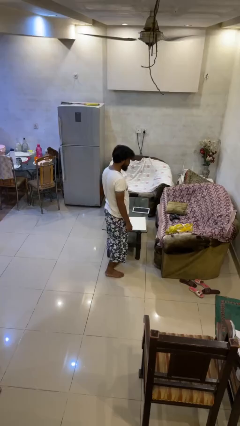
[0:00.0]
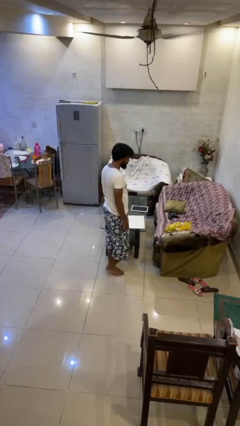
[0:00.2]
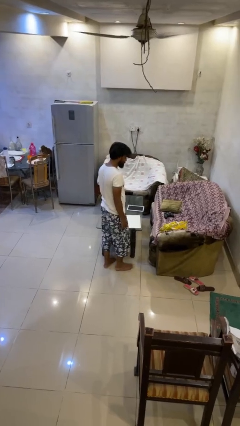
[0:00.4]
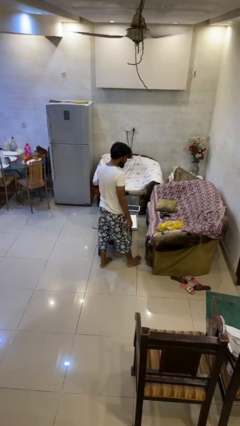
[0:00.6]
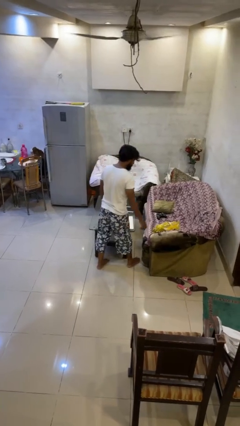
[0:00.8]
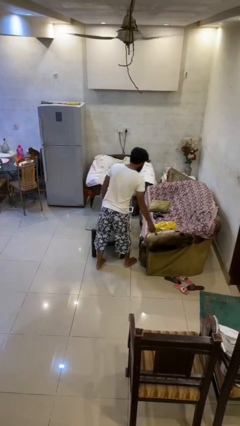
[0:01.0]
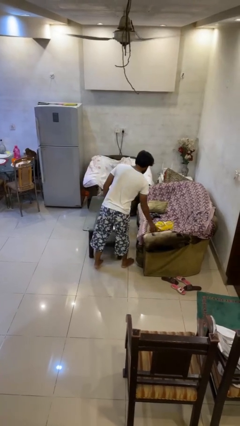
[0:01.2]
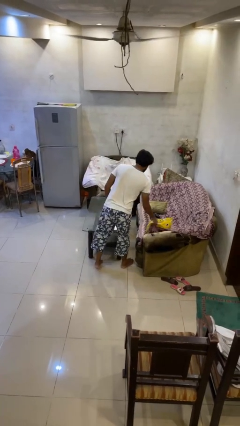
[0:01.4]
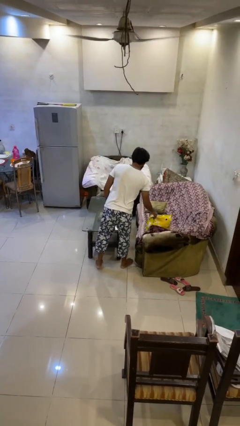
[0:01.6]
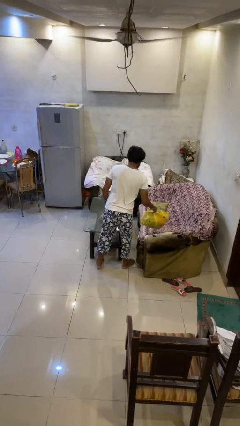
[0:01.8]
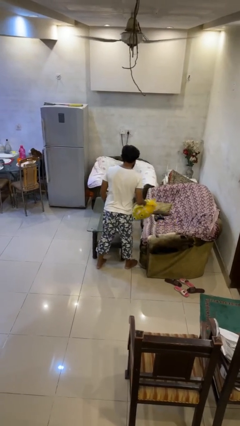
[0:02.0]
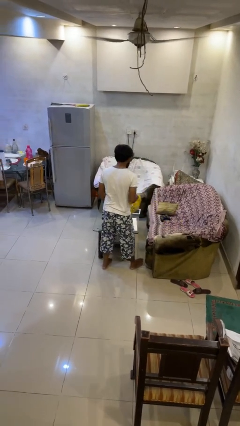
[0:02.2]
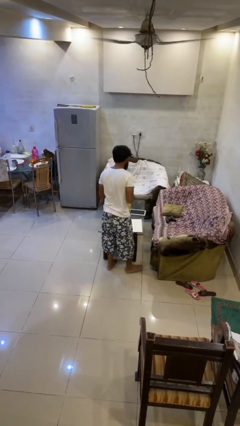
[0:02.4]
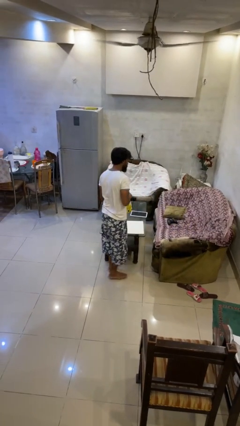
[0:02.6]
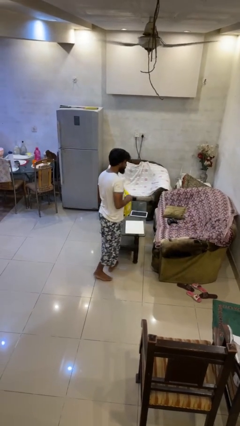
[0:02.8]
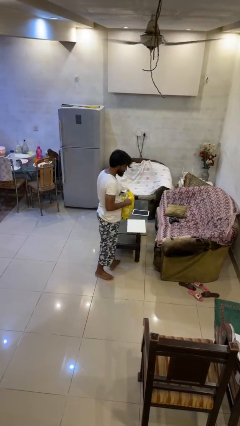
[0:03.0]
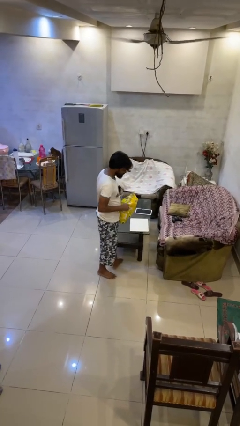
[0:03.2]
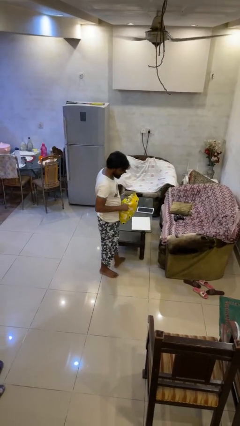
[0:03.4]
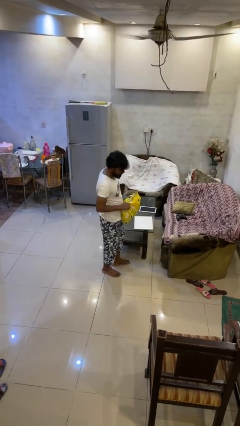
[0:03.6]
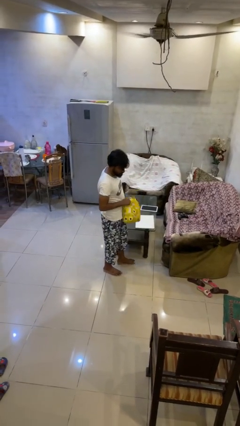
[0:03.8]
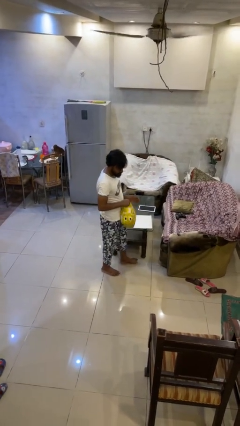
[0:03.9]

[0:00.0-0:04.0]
person picks up object from couch

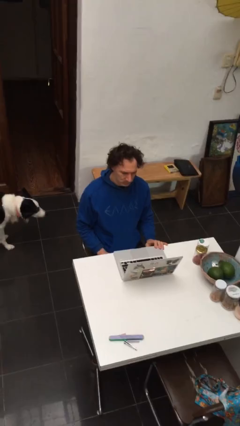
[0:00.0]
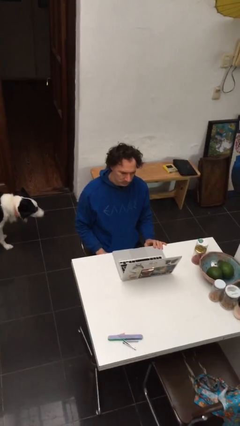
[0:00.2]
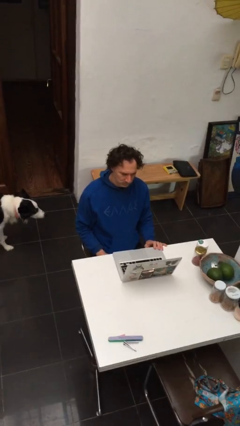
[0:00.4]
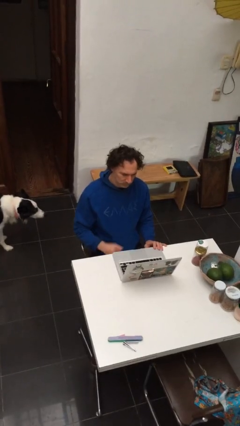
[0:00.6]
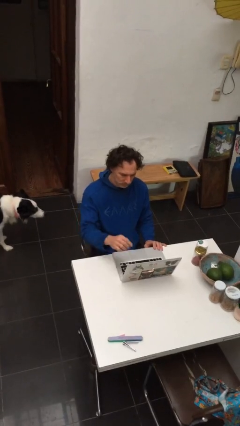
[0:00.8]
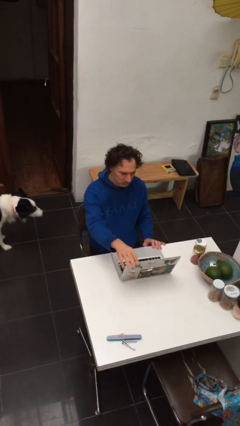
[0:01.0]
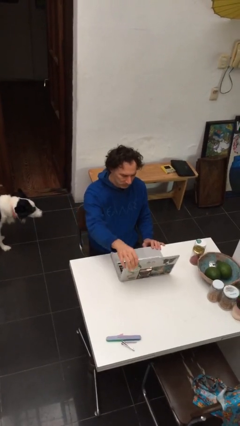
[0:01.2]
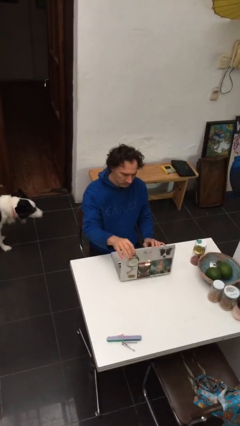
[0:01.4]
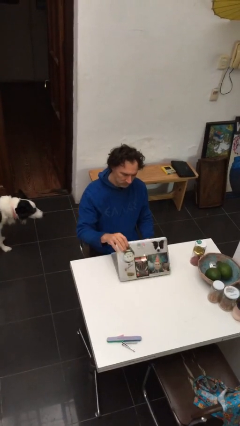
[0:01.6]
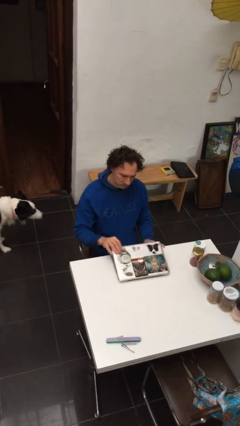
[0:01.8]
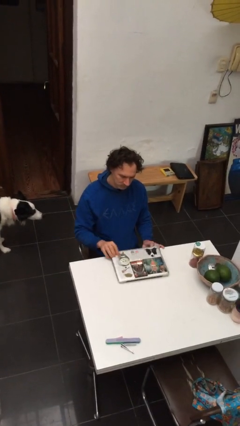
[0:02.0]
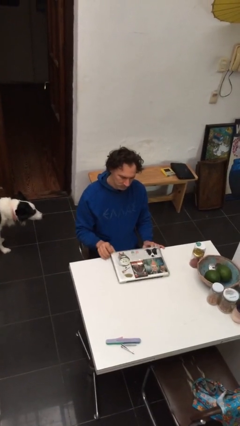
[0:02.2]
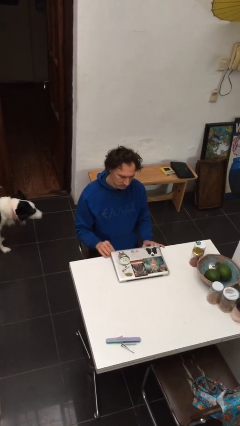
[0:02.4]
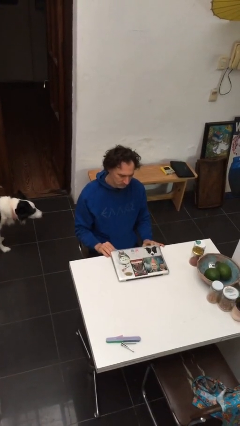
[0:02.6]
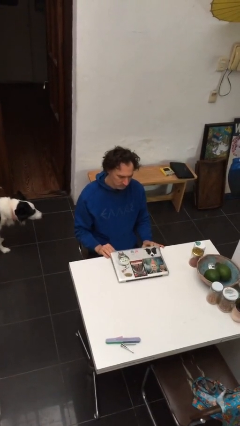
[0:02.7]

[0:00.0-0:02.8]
person closes laptop

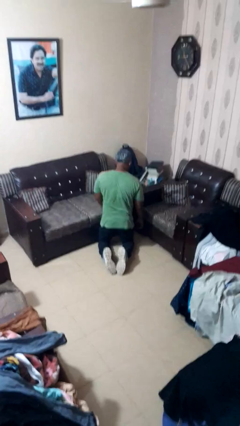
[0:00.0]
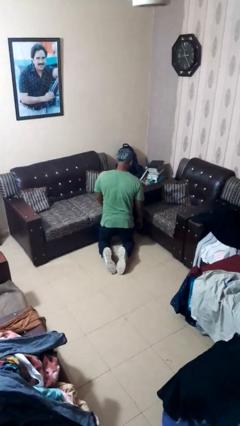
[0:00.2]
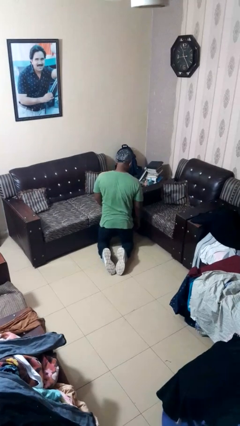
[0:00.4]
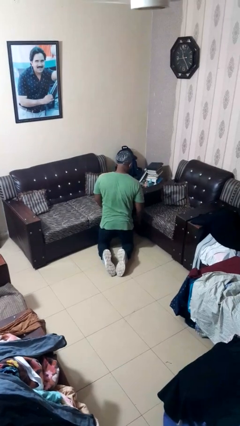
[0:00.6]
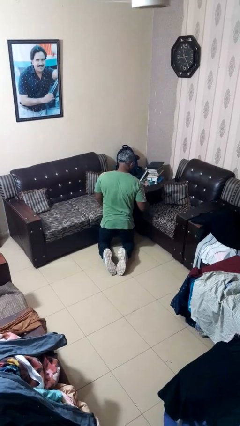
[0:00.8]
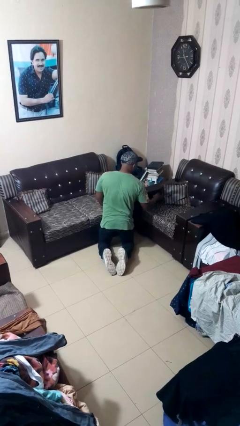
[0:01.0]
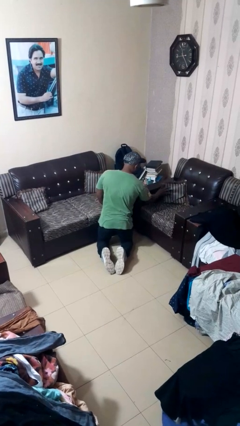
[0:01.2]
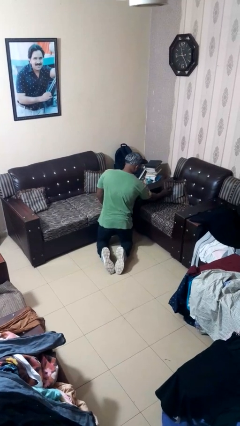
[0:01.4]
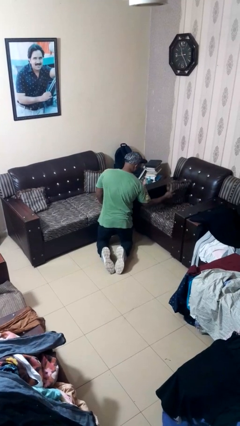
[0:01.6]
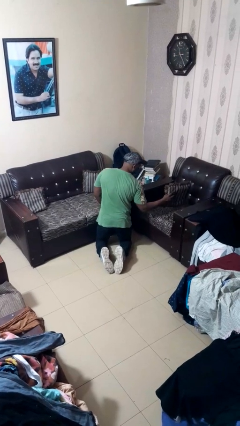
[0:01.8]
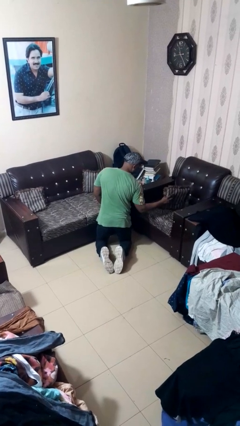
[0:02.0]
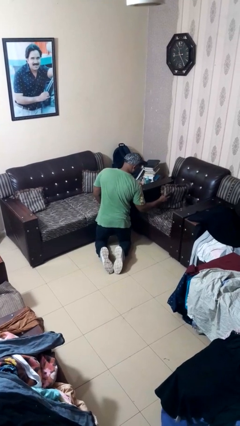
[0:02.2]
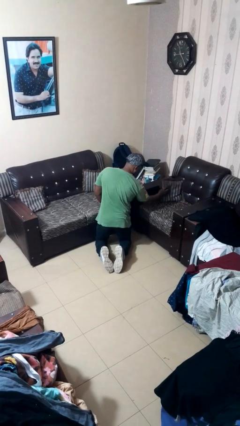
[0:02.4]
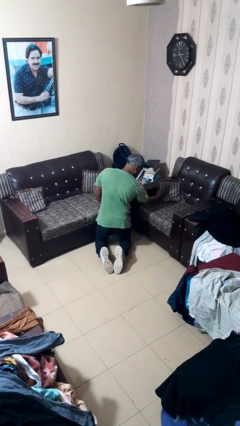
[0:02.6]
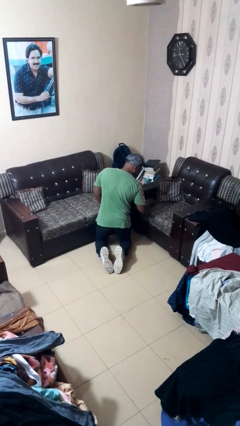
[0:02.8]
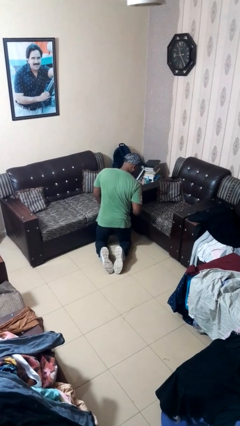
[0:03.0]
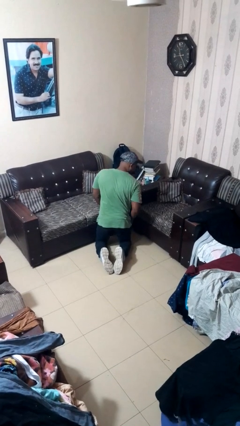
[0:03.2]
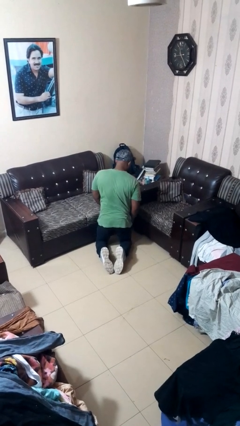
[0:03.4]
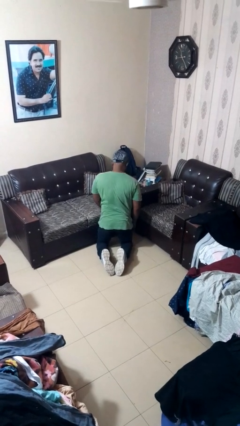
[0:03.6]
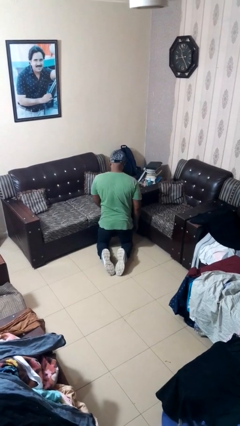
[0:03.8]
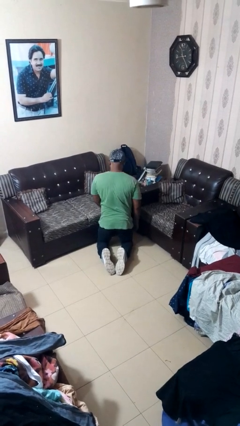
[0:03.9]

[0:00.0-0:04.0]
person searches in couch

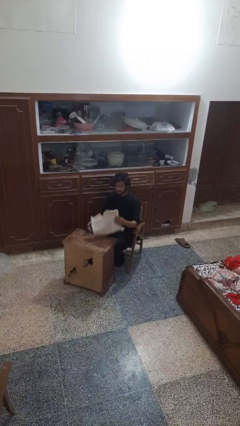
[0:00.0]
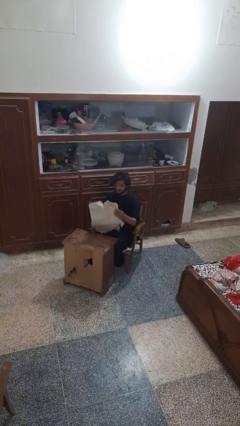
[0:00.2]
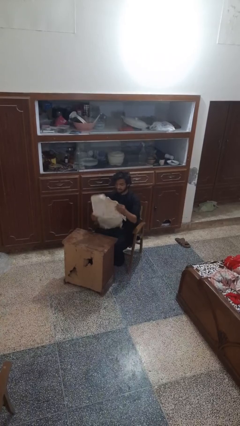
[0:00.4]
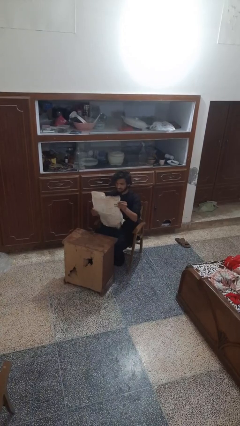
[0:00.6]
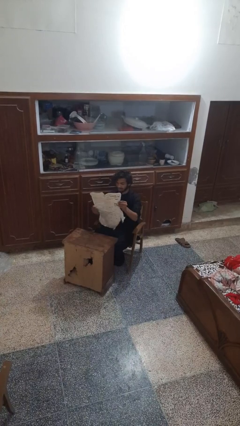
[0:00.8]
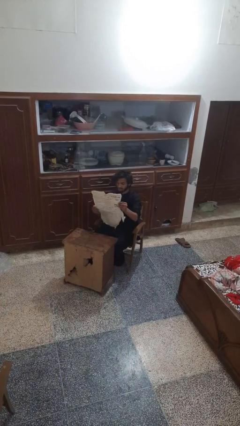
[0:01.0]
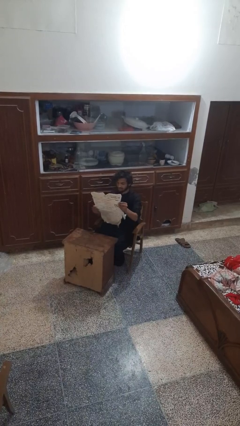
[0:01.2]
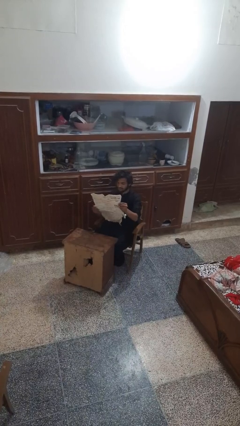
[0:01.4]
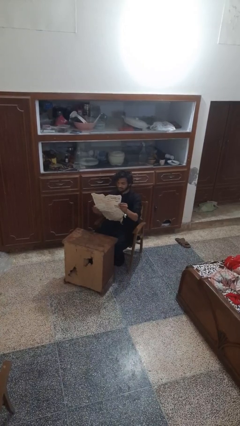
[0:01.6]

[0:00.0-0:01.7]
person reads newspaper

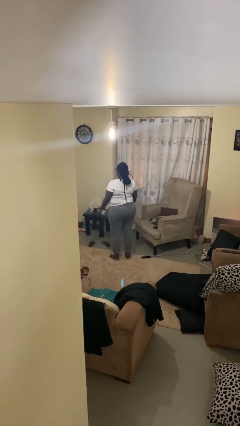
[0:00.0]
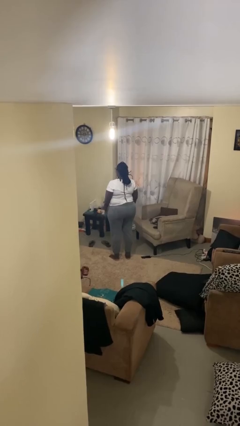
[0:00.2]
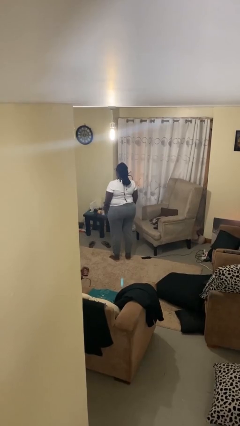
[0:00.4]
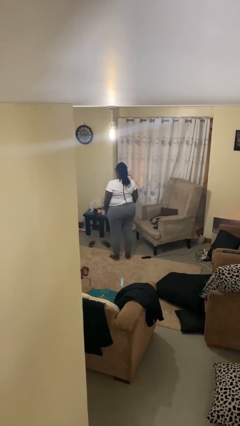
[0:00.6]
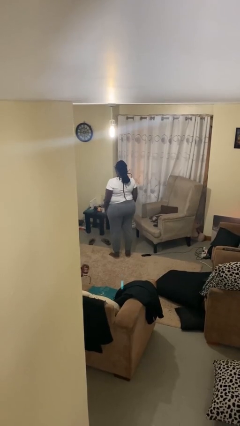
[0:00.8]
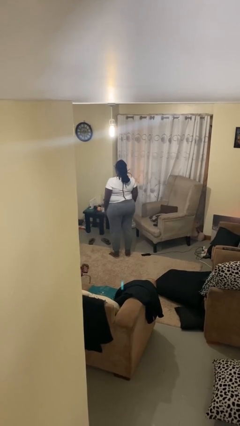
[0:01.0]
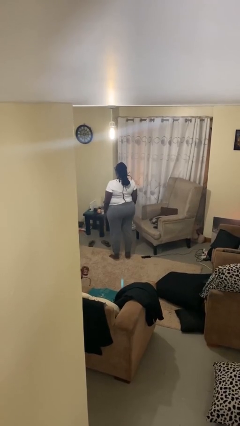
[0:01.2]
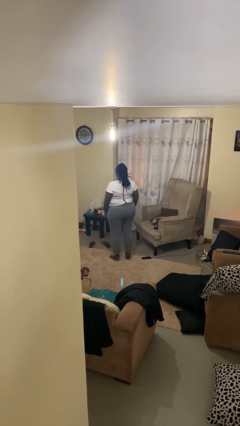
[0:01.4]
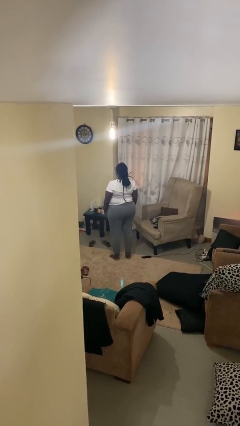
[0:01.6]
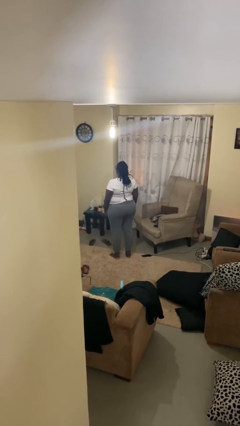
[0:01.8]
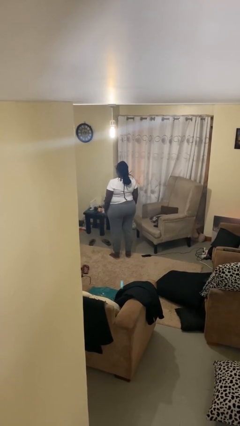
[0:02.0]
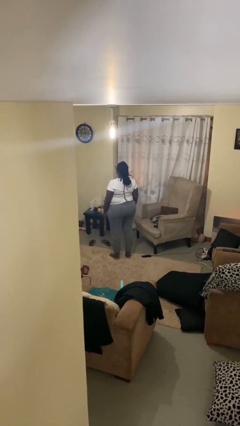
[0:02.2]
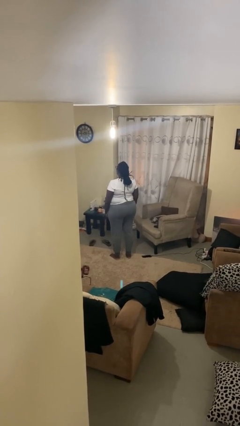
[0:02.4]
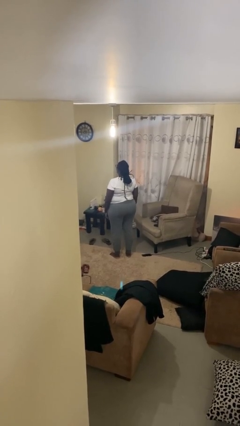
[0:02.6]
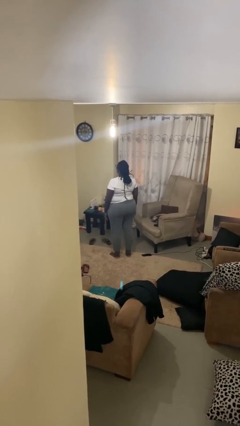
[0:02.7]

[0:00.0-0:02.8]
person slaps hands on thighs

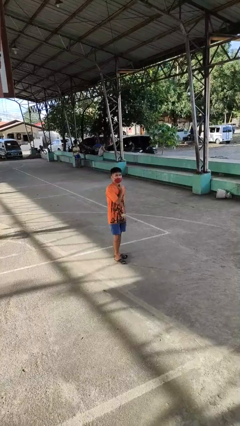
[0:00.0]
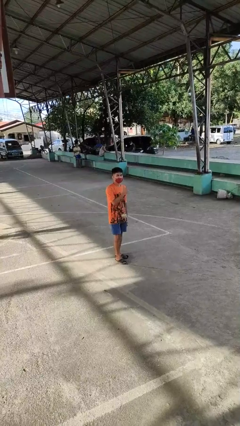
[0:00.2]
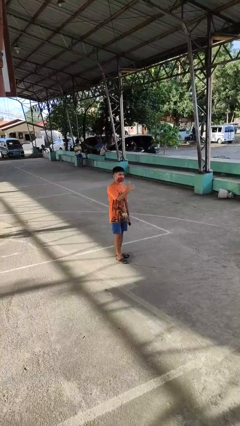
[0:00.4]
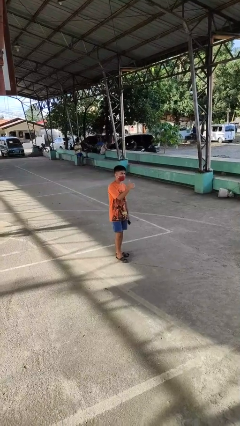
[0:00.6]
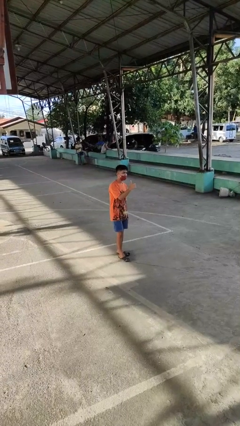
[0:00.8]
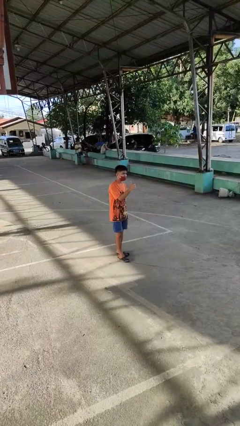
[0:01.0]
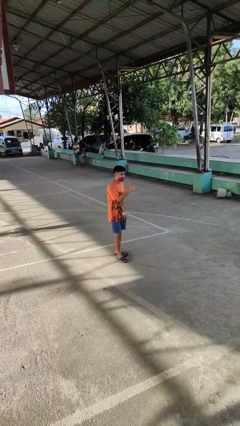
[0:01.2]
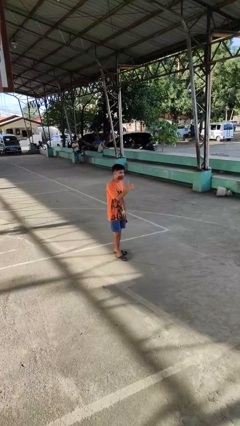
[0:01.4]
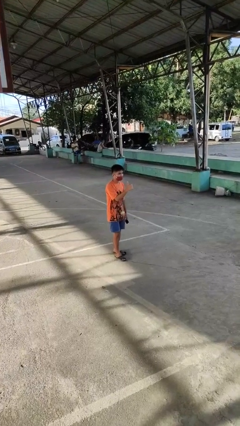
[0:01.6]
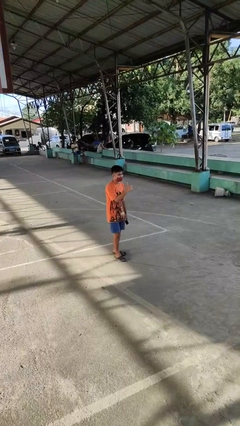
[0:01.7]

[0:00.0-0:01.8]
person gestures thumbs up

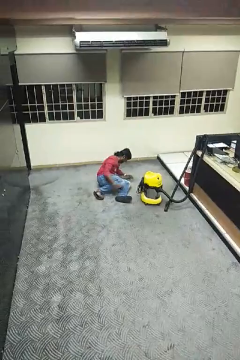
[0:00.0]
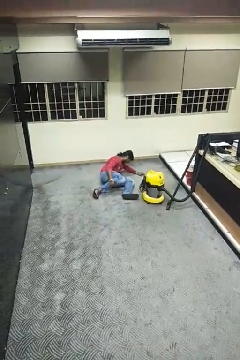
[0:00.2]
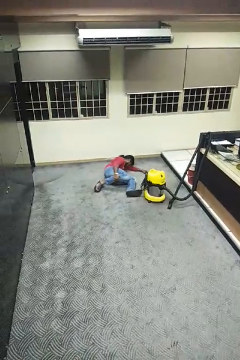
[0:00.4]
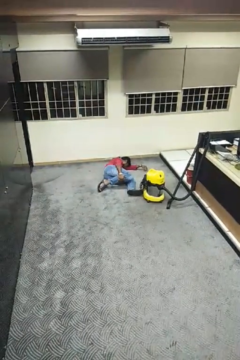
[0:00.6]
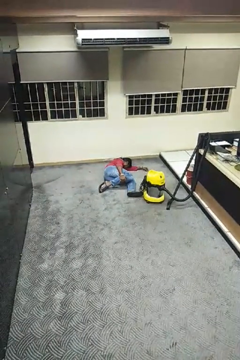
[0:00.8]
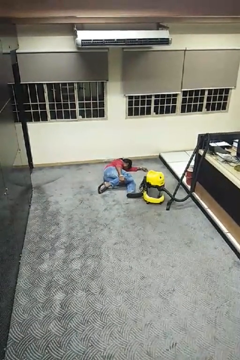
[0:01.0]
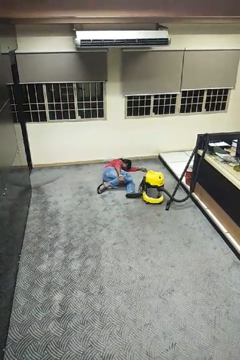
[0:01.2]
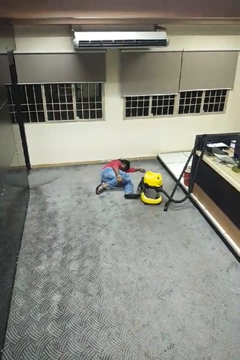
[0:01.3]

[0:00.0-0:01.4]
person lies down on floor
